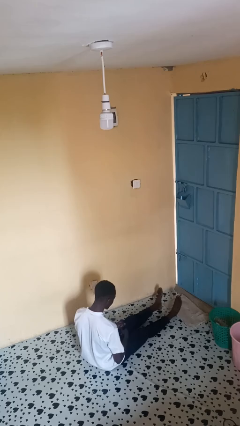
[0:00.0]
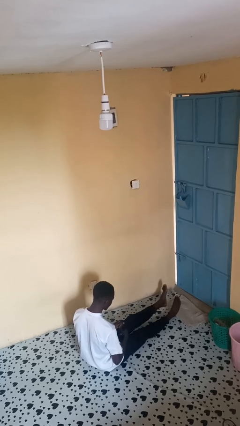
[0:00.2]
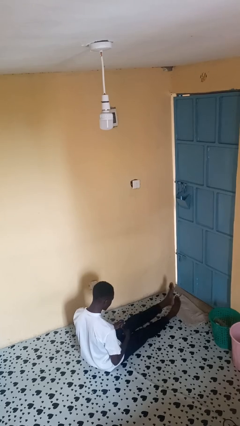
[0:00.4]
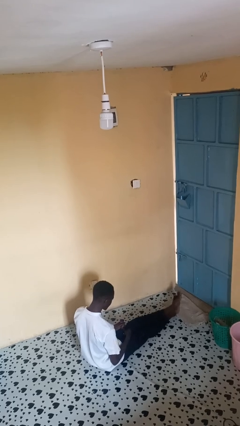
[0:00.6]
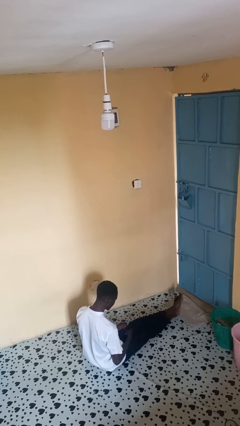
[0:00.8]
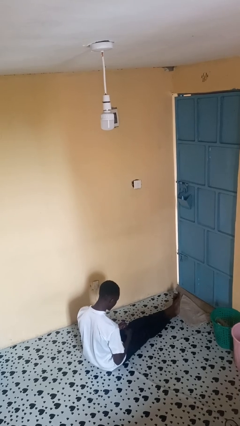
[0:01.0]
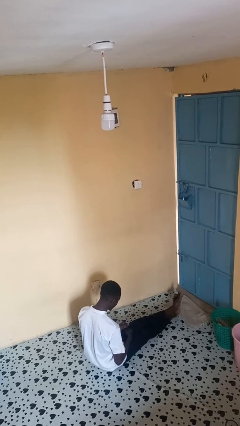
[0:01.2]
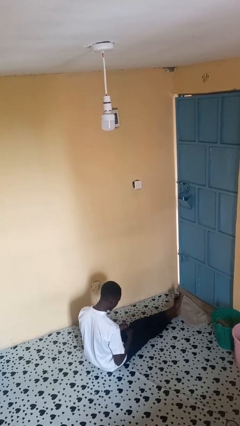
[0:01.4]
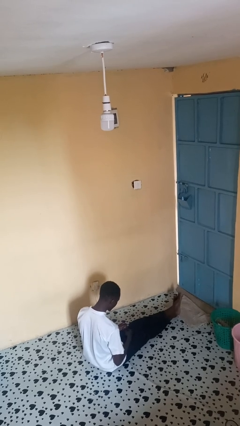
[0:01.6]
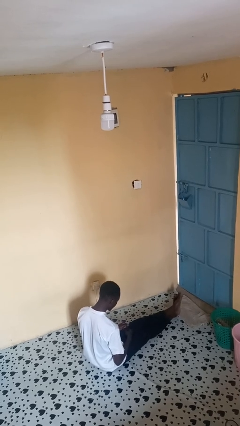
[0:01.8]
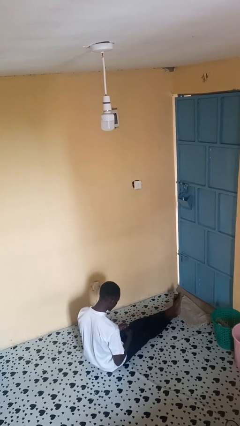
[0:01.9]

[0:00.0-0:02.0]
person crosses legs

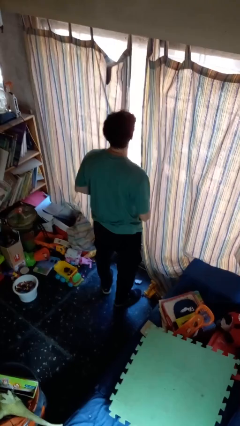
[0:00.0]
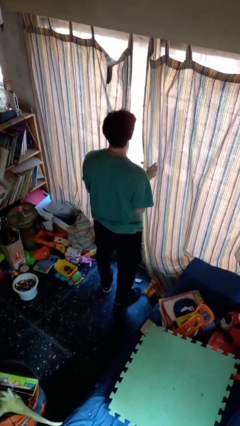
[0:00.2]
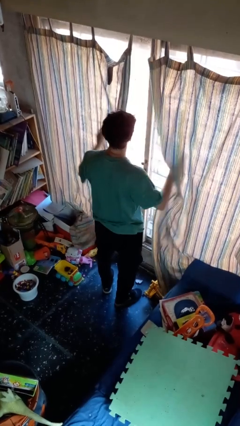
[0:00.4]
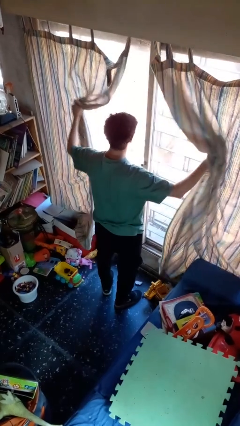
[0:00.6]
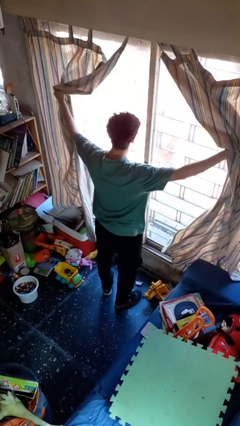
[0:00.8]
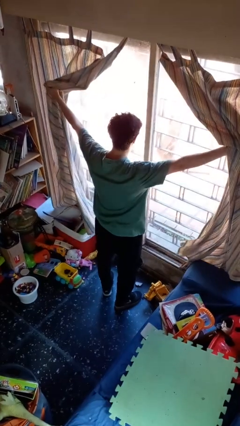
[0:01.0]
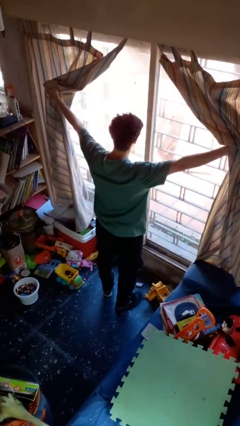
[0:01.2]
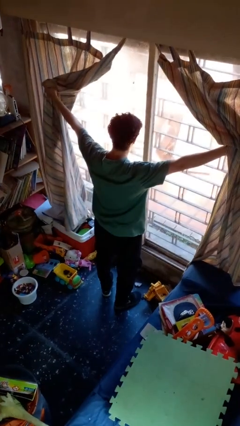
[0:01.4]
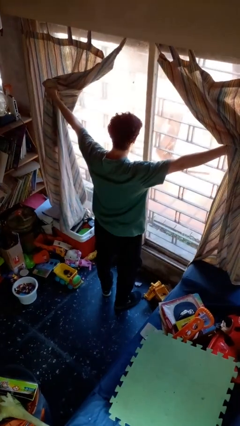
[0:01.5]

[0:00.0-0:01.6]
person opens curtains

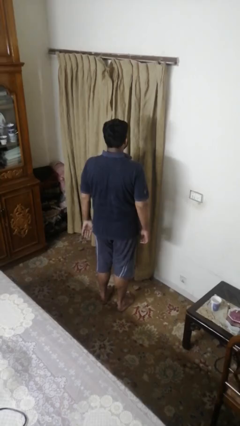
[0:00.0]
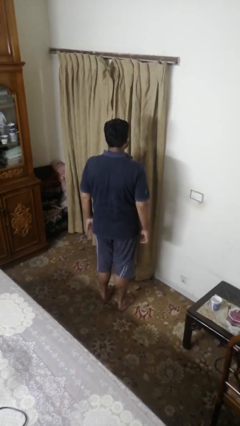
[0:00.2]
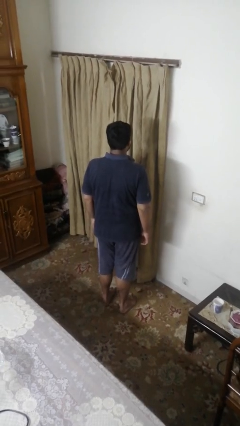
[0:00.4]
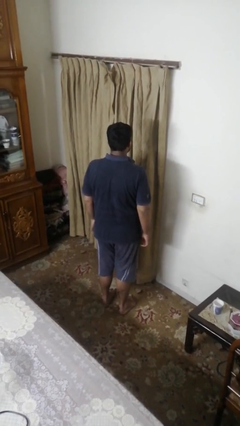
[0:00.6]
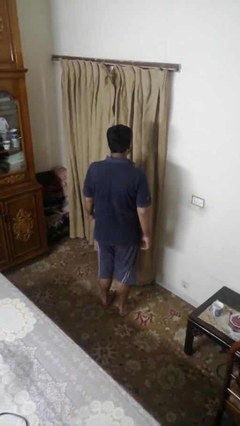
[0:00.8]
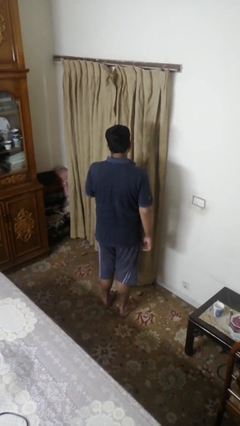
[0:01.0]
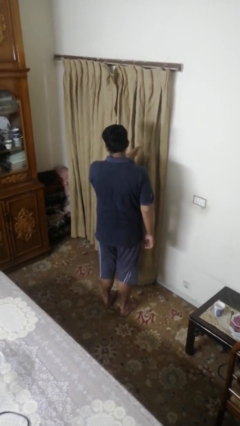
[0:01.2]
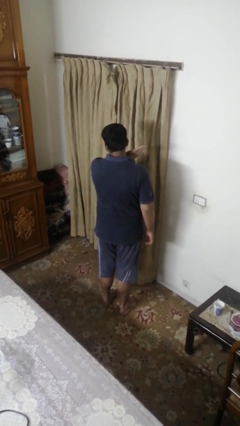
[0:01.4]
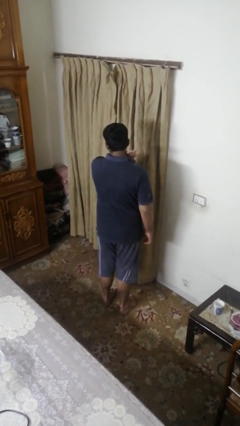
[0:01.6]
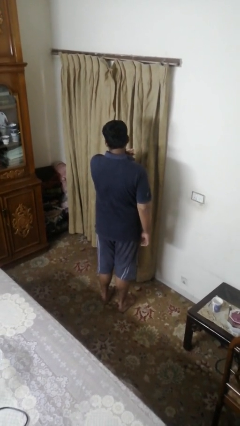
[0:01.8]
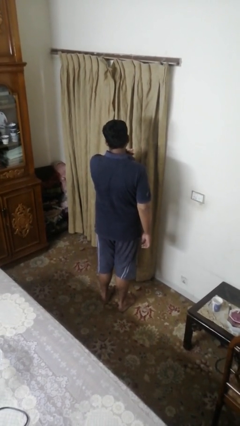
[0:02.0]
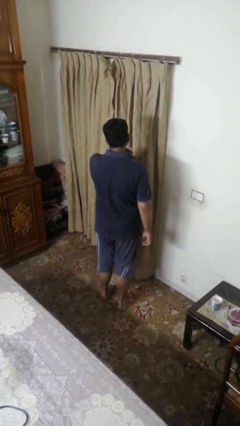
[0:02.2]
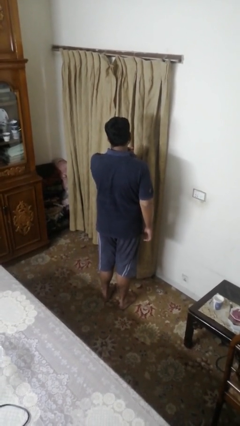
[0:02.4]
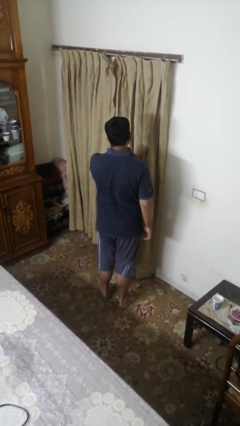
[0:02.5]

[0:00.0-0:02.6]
person gestures cut

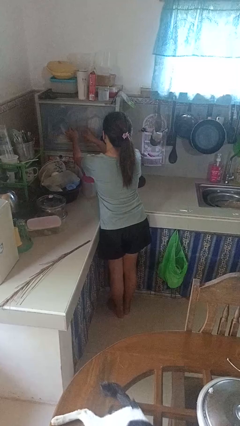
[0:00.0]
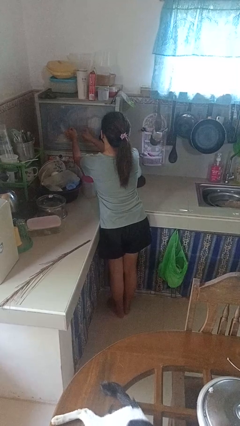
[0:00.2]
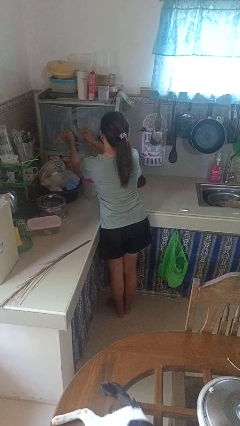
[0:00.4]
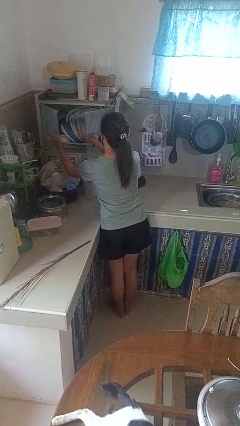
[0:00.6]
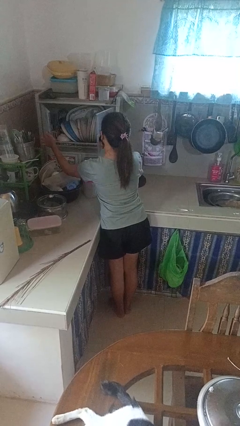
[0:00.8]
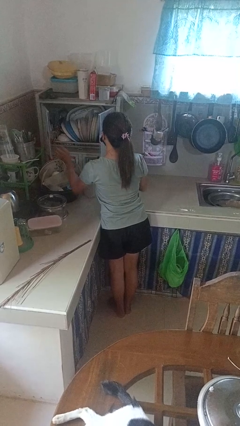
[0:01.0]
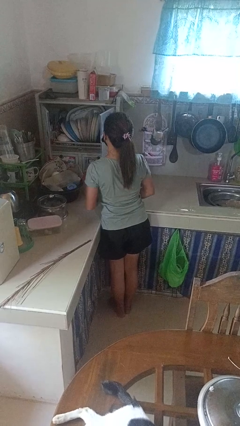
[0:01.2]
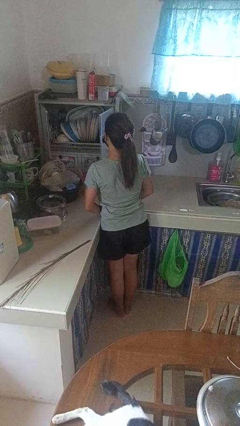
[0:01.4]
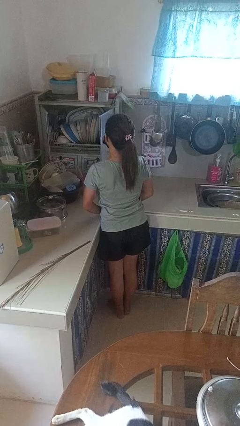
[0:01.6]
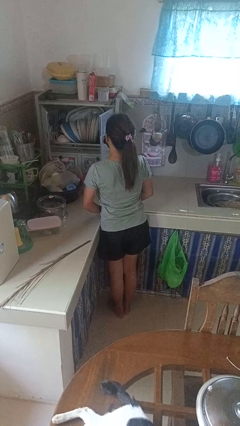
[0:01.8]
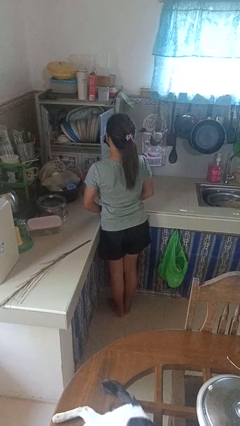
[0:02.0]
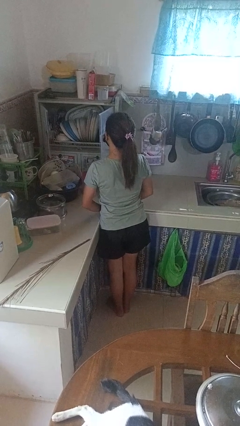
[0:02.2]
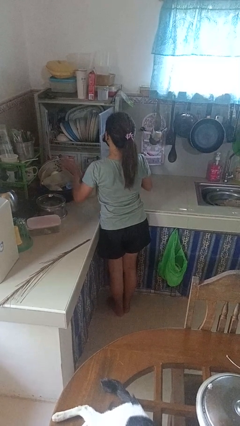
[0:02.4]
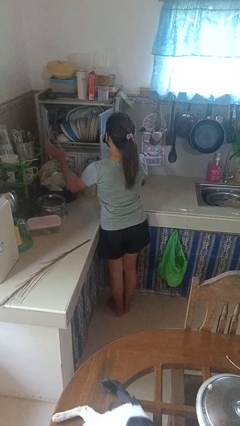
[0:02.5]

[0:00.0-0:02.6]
person opens kitchen drawer

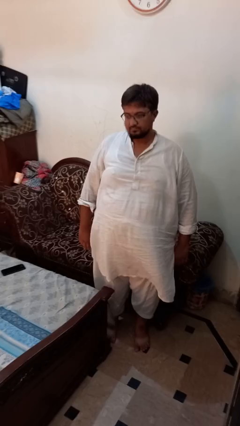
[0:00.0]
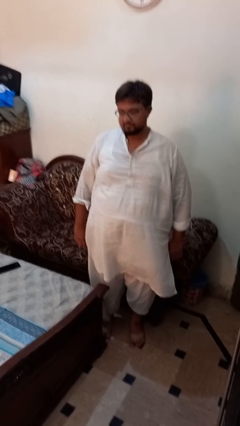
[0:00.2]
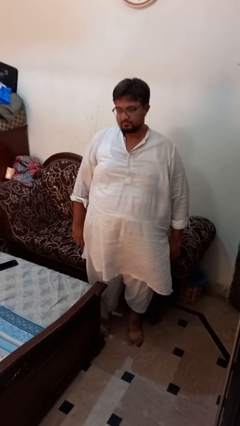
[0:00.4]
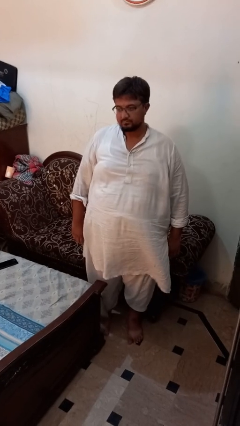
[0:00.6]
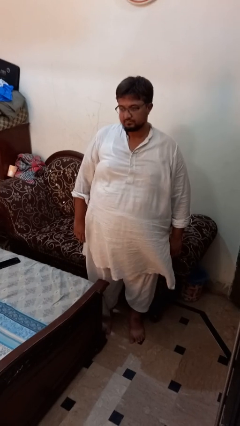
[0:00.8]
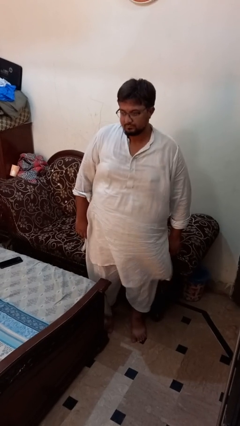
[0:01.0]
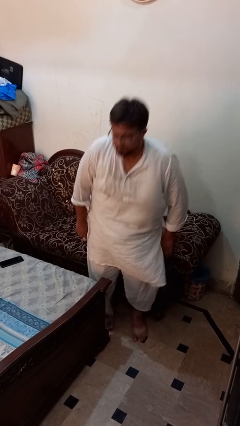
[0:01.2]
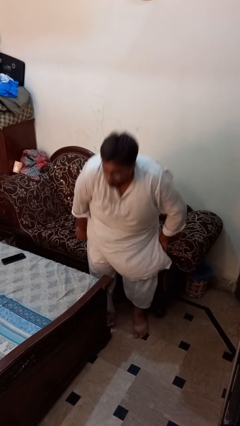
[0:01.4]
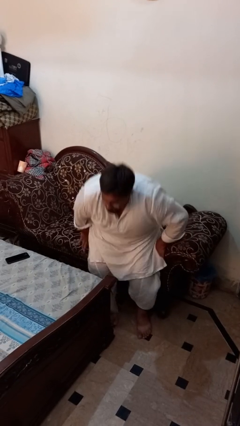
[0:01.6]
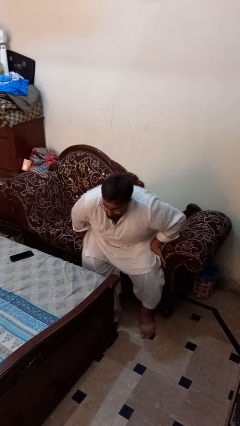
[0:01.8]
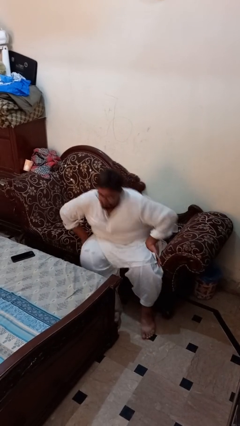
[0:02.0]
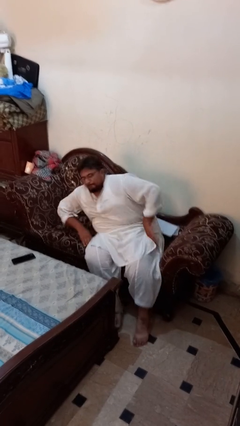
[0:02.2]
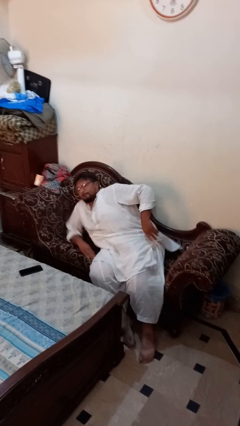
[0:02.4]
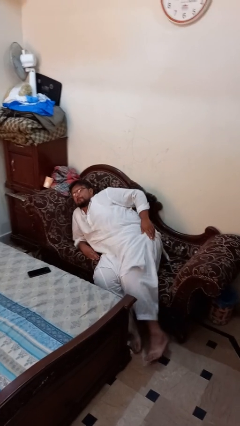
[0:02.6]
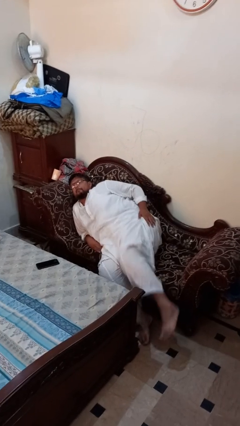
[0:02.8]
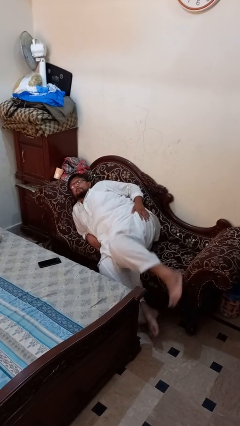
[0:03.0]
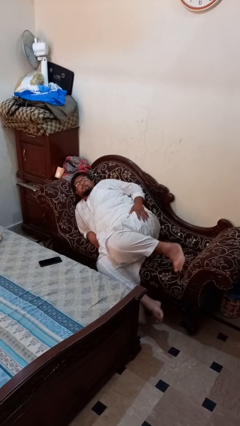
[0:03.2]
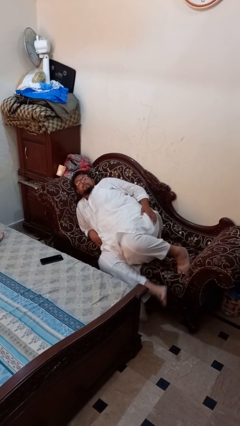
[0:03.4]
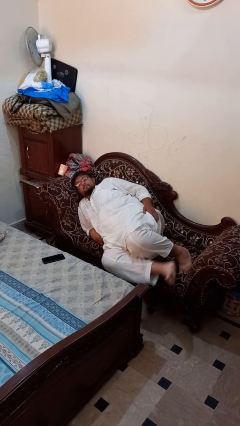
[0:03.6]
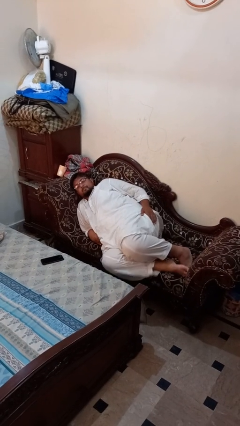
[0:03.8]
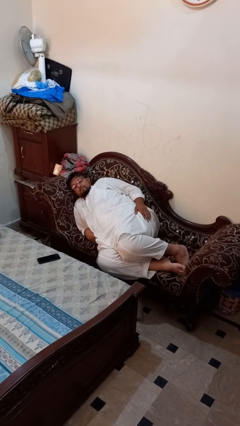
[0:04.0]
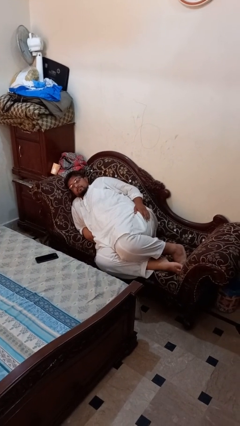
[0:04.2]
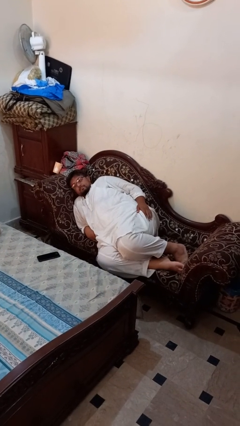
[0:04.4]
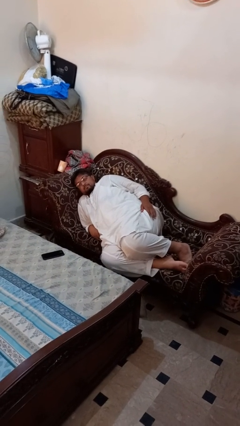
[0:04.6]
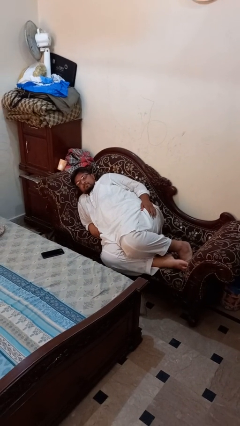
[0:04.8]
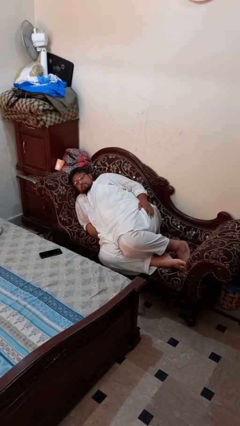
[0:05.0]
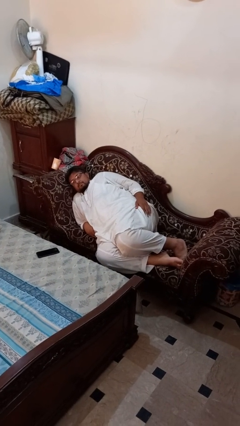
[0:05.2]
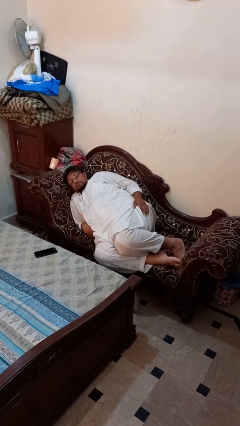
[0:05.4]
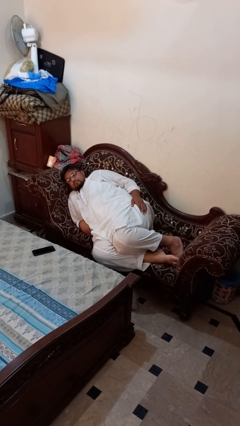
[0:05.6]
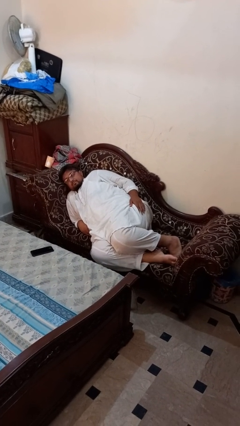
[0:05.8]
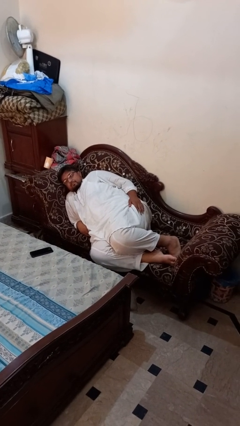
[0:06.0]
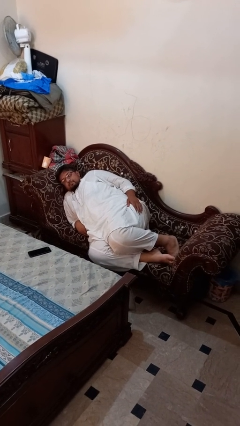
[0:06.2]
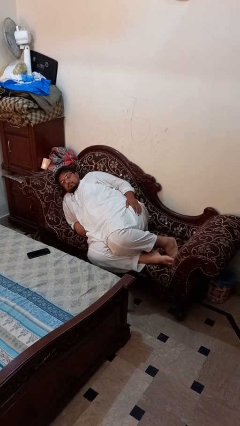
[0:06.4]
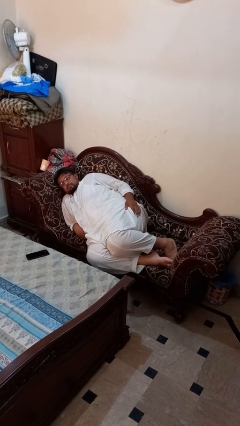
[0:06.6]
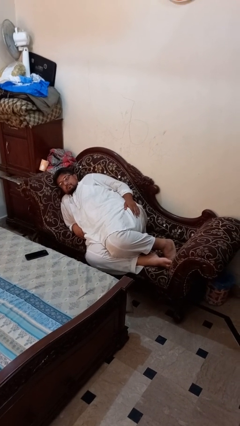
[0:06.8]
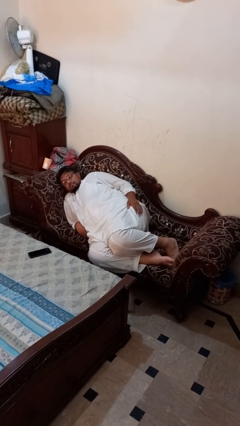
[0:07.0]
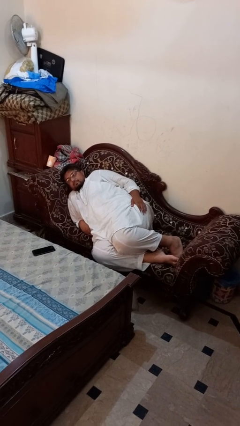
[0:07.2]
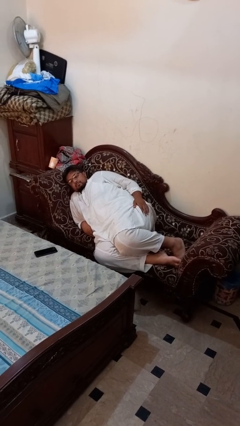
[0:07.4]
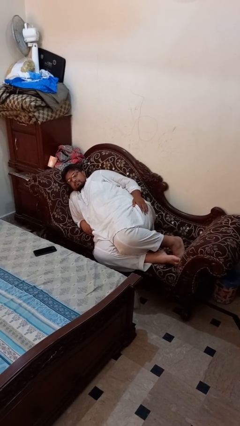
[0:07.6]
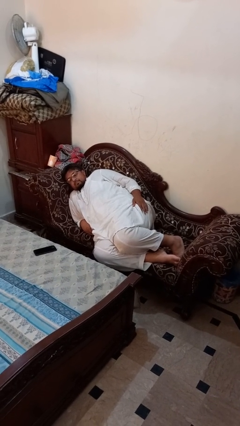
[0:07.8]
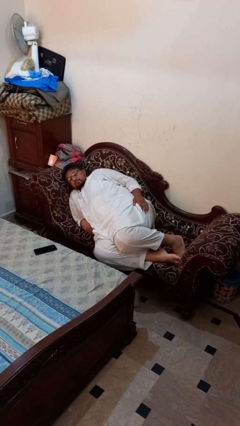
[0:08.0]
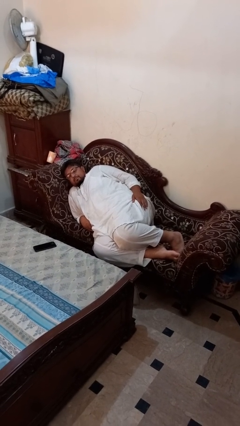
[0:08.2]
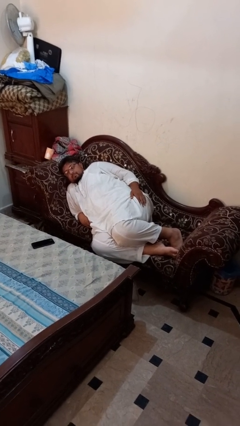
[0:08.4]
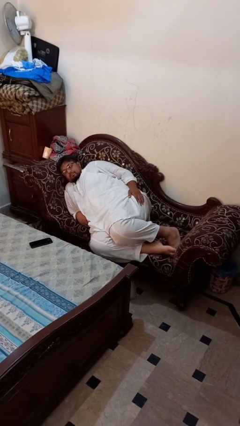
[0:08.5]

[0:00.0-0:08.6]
person lies down on couch
